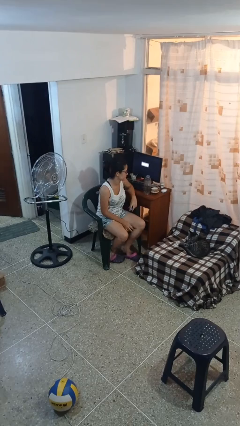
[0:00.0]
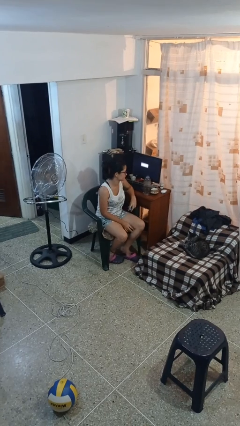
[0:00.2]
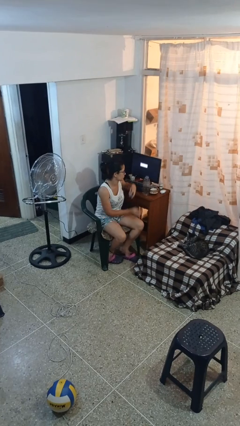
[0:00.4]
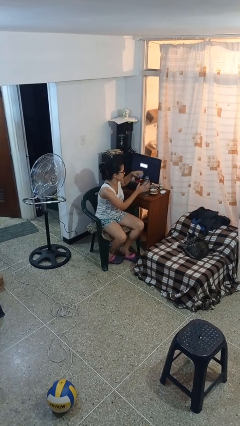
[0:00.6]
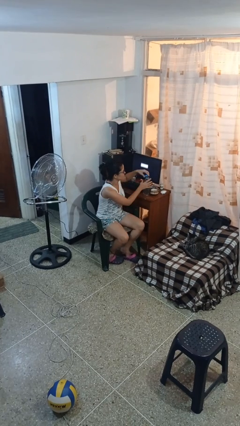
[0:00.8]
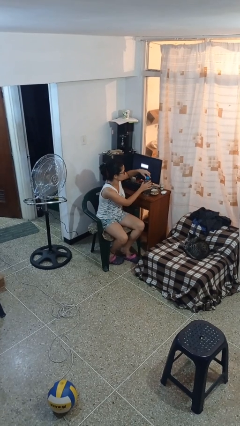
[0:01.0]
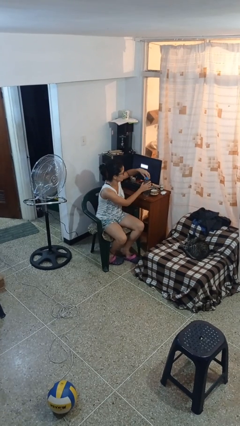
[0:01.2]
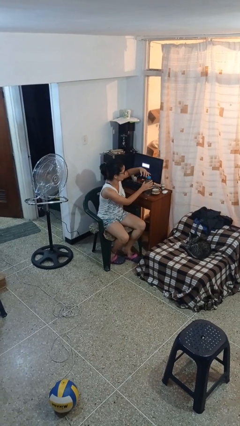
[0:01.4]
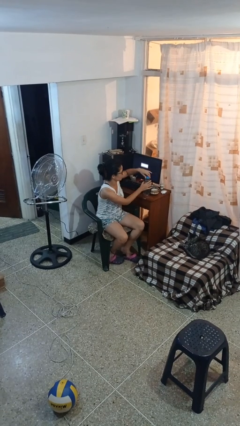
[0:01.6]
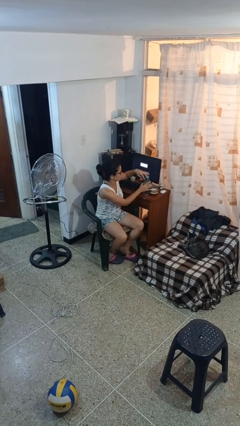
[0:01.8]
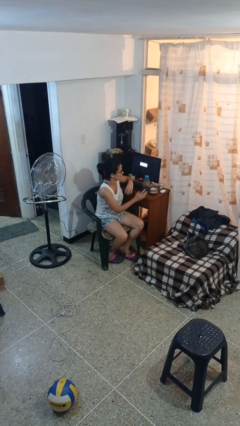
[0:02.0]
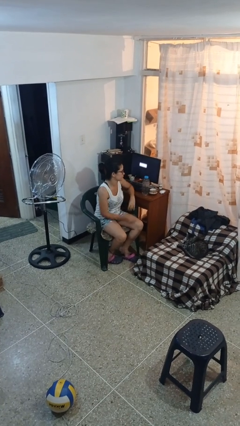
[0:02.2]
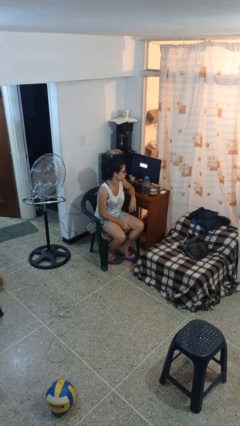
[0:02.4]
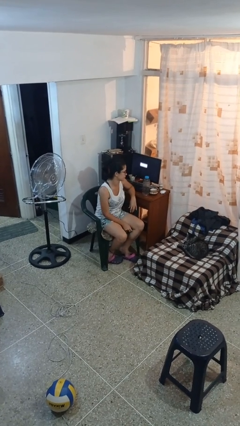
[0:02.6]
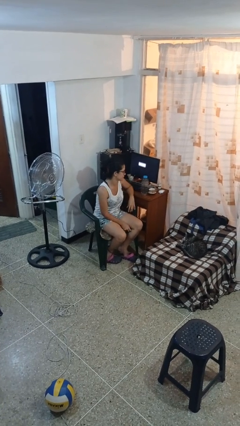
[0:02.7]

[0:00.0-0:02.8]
person screws lid to bottle

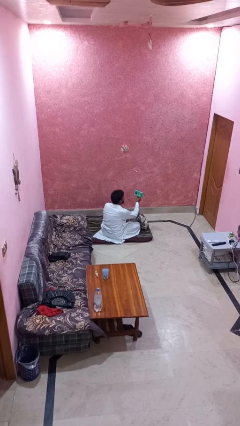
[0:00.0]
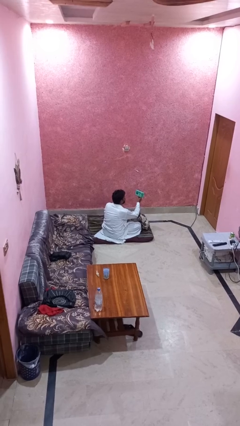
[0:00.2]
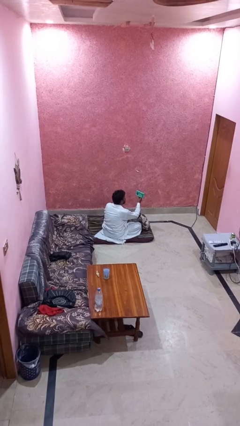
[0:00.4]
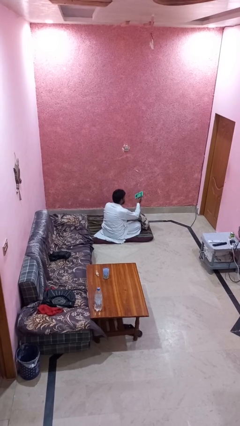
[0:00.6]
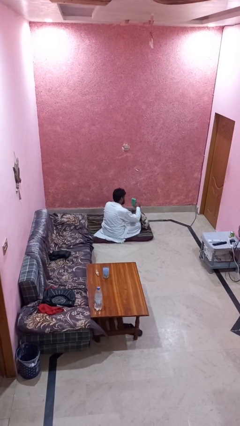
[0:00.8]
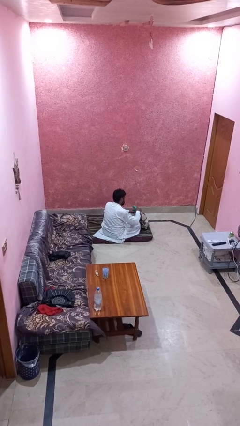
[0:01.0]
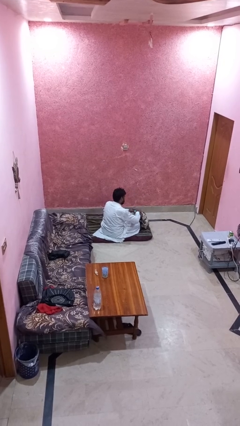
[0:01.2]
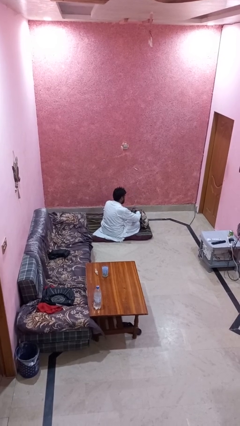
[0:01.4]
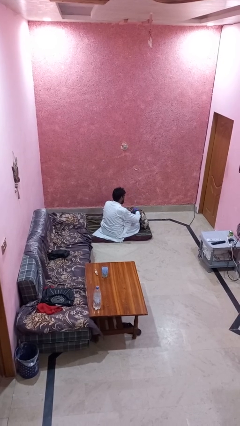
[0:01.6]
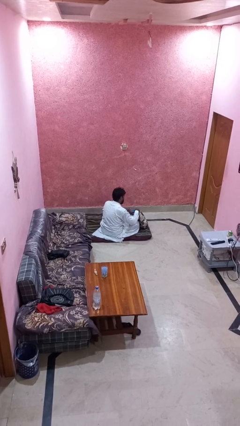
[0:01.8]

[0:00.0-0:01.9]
person puts object into backpack

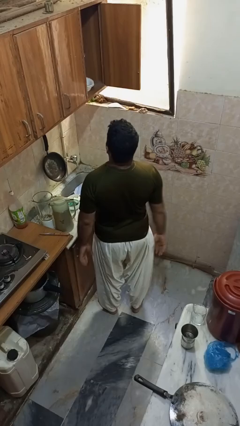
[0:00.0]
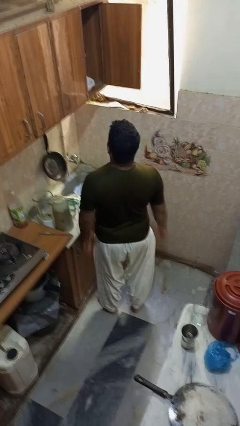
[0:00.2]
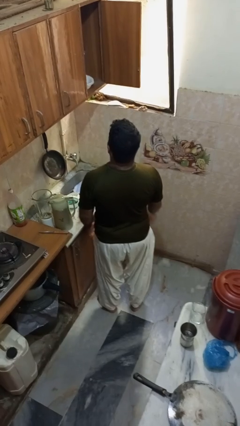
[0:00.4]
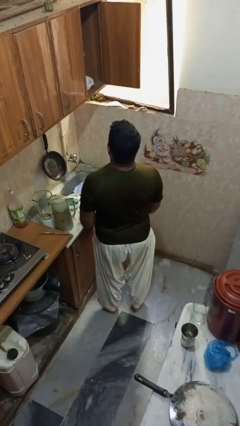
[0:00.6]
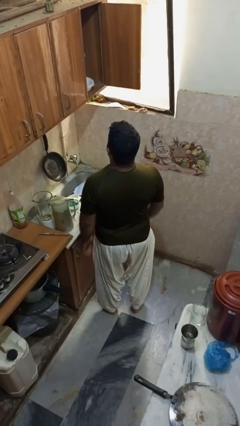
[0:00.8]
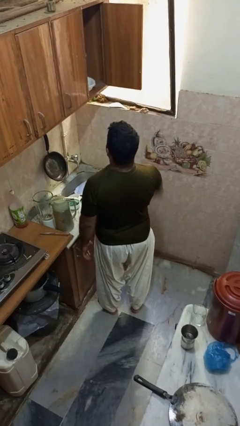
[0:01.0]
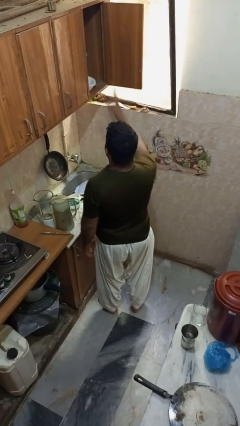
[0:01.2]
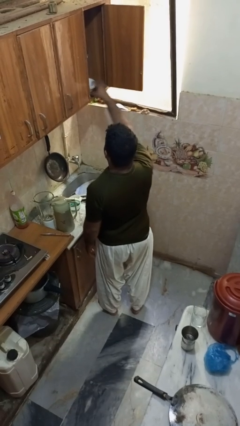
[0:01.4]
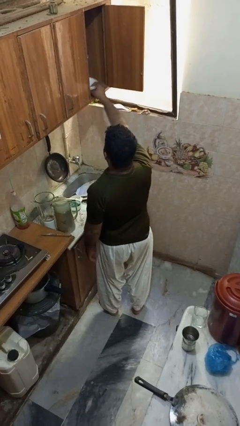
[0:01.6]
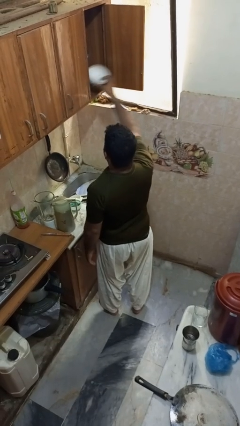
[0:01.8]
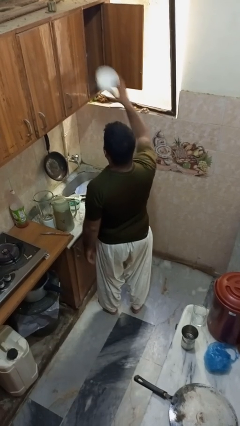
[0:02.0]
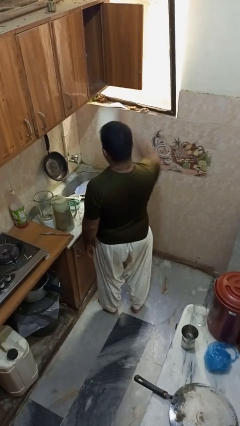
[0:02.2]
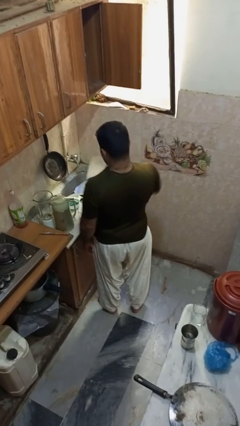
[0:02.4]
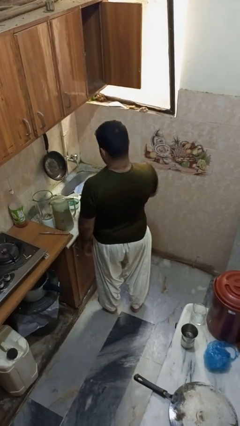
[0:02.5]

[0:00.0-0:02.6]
person takes object from cabinet

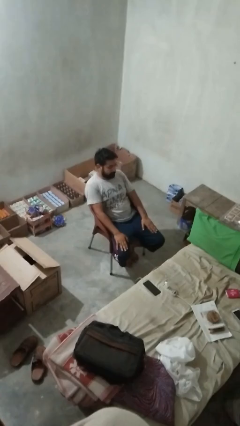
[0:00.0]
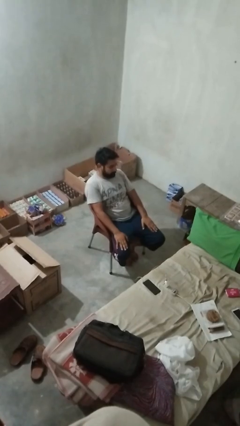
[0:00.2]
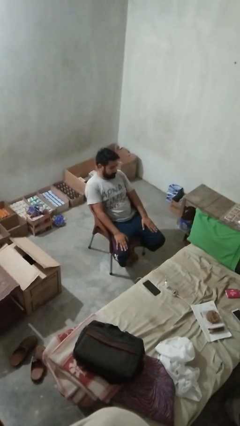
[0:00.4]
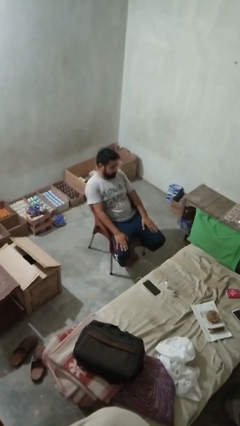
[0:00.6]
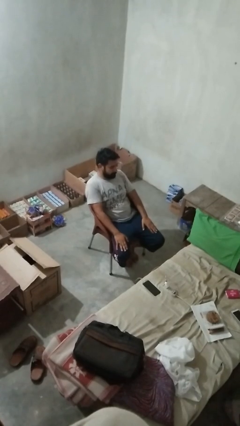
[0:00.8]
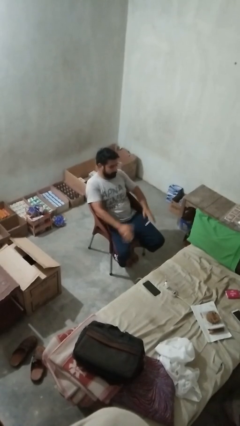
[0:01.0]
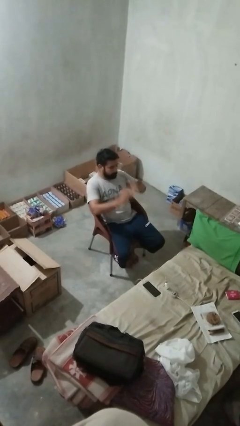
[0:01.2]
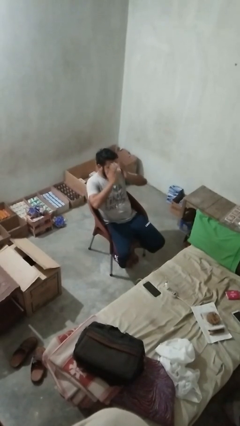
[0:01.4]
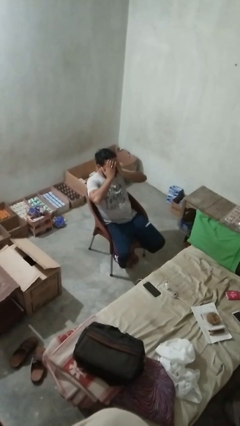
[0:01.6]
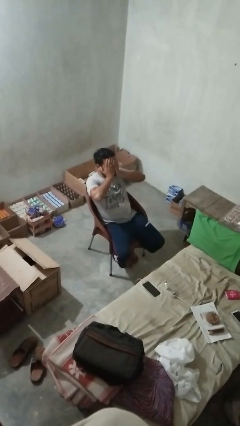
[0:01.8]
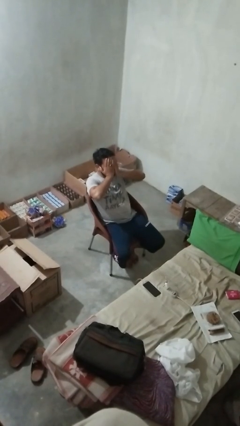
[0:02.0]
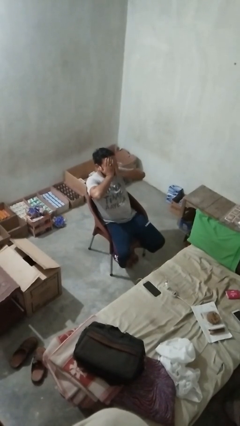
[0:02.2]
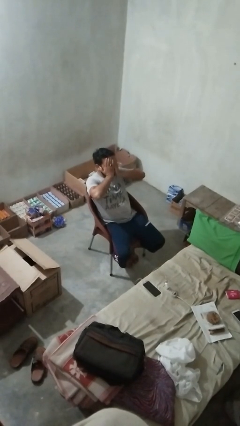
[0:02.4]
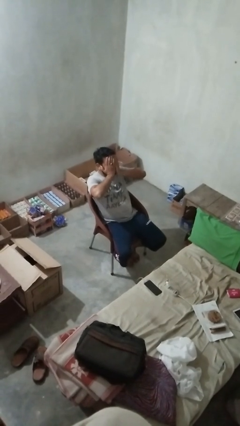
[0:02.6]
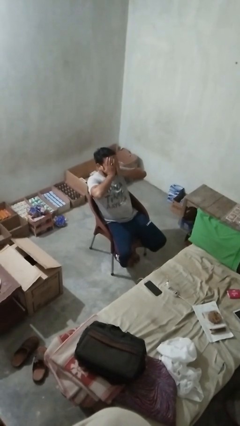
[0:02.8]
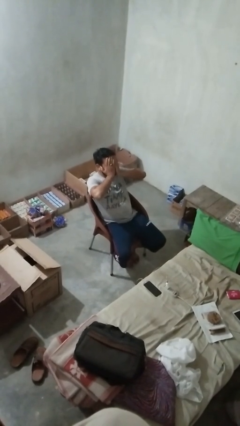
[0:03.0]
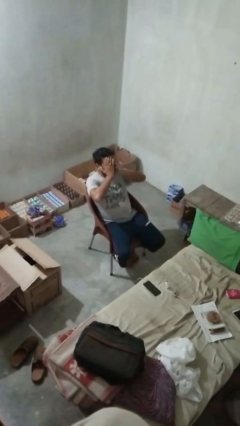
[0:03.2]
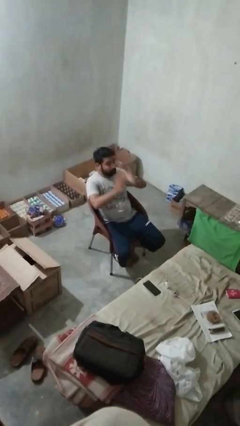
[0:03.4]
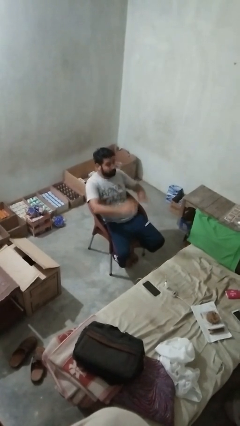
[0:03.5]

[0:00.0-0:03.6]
person covers face with hands

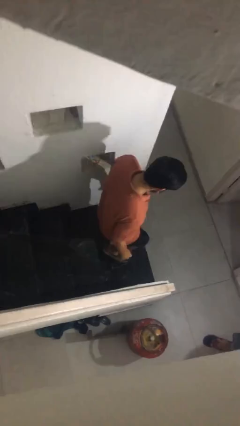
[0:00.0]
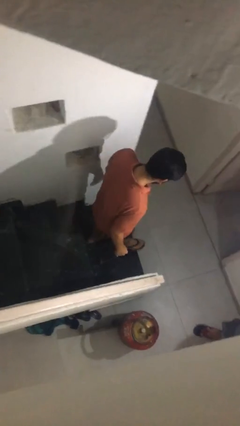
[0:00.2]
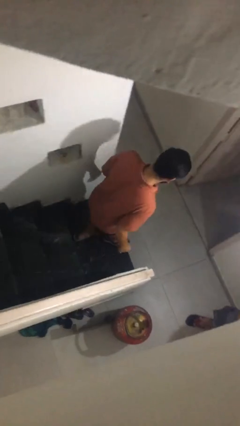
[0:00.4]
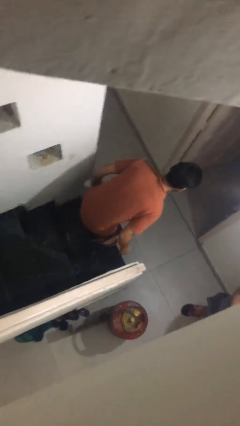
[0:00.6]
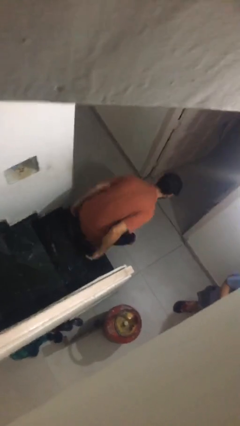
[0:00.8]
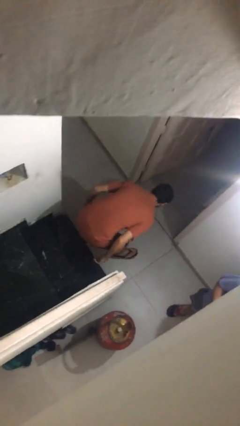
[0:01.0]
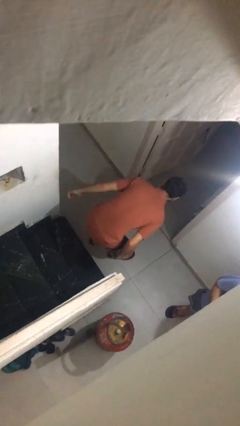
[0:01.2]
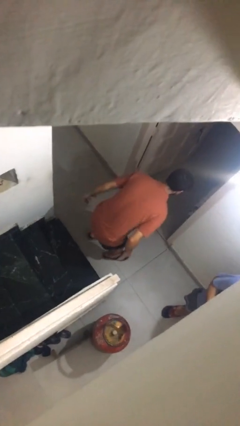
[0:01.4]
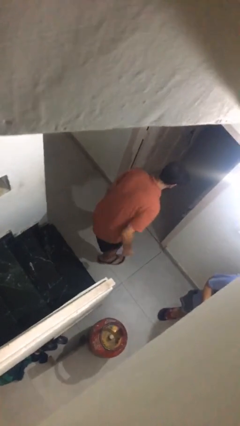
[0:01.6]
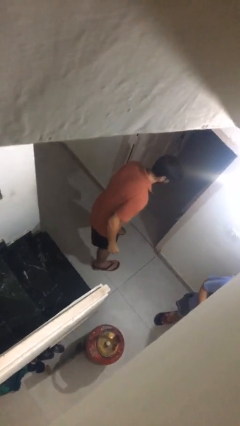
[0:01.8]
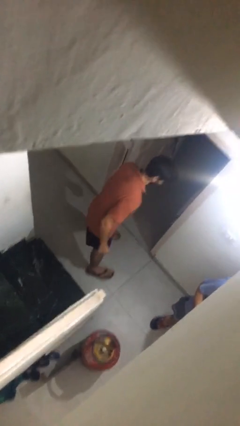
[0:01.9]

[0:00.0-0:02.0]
person trips on stair

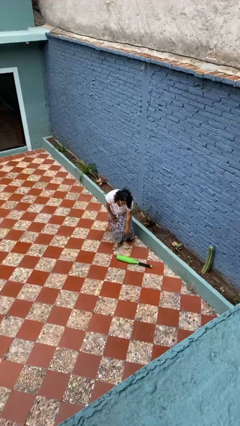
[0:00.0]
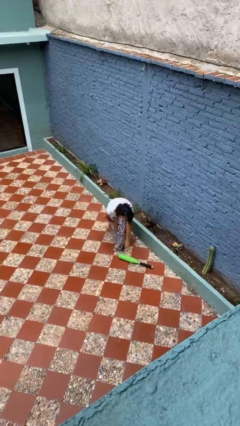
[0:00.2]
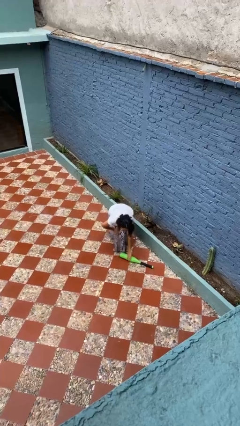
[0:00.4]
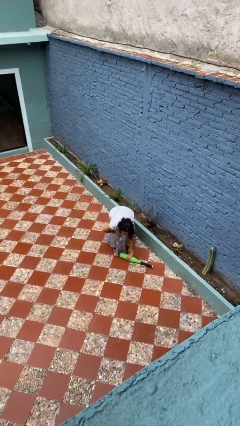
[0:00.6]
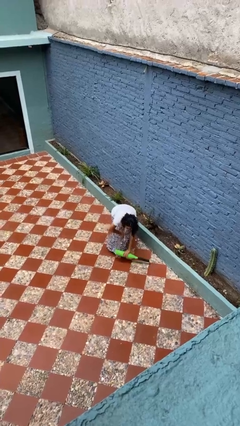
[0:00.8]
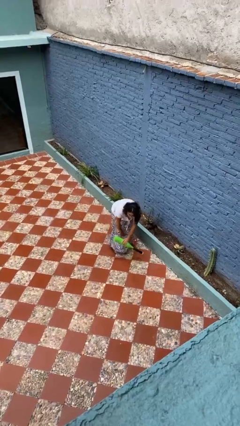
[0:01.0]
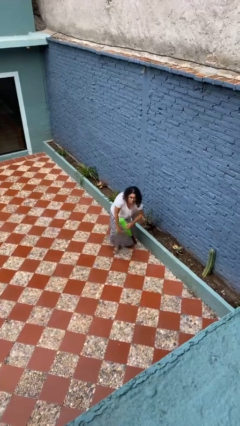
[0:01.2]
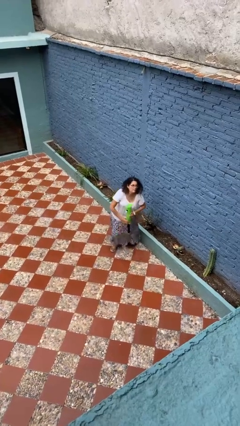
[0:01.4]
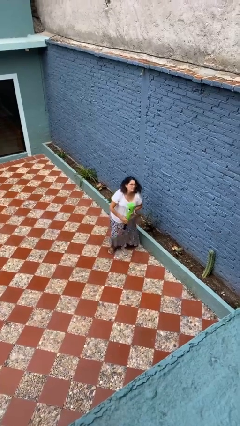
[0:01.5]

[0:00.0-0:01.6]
person picks up object from floor

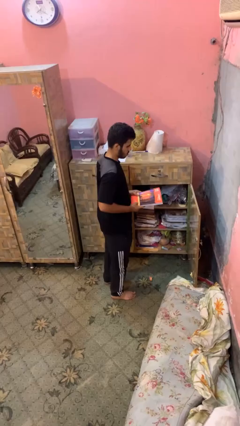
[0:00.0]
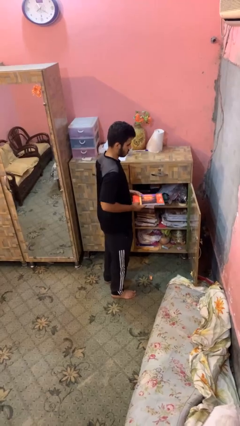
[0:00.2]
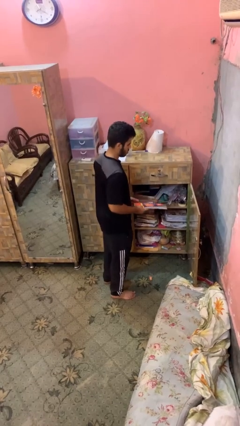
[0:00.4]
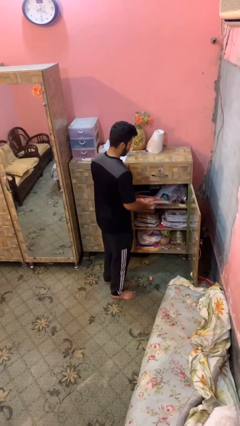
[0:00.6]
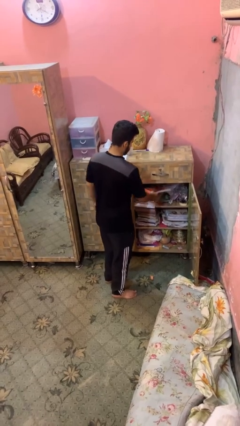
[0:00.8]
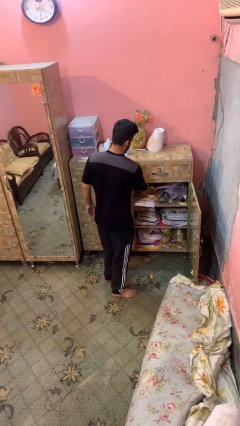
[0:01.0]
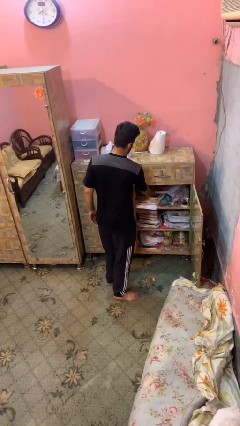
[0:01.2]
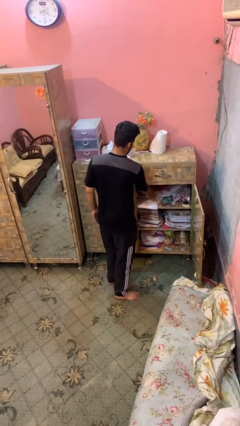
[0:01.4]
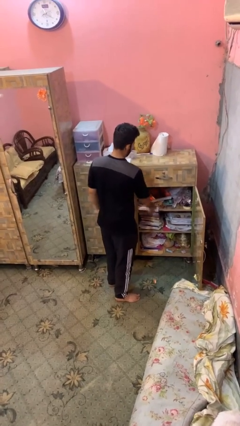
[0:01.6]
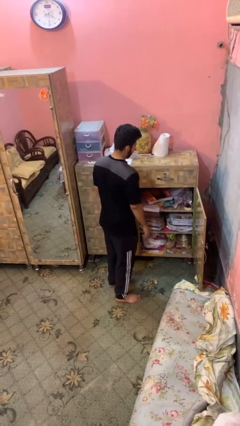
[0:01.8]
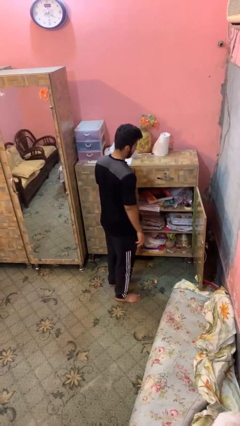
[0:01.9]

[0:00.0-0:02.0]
person puts down object into cabinet

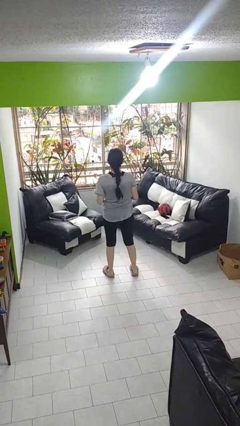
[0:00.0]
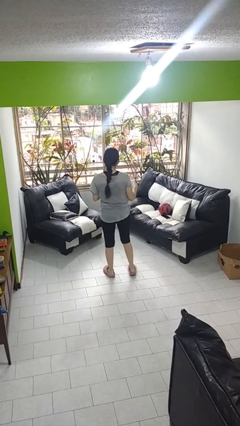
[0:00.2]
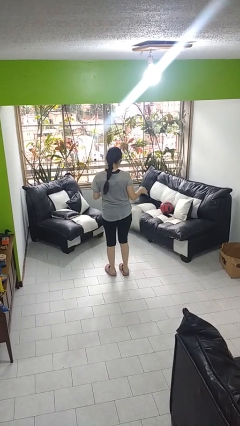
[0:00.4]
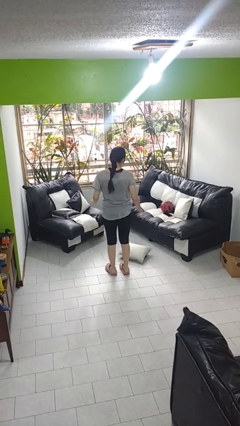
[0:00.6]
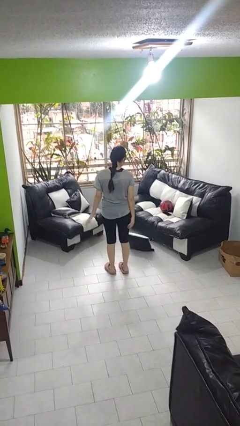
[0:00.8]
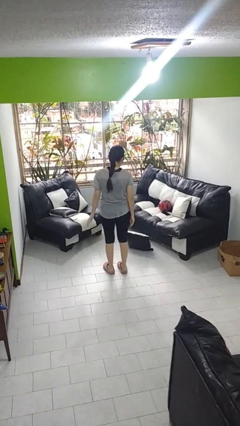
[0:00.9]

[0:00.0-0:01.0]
person drops object
